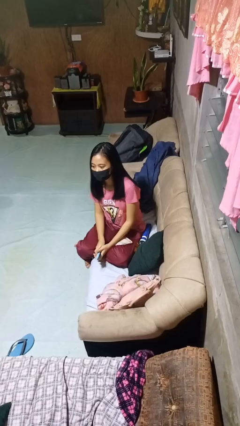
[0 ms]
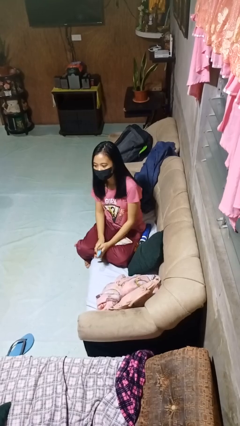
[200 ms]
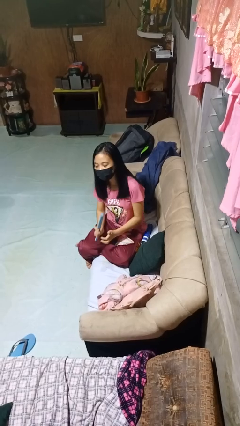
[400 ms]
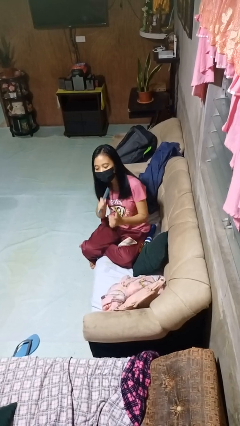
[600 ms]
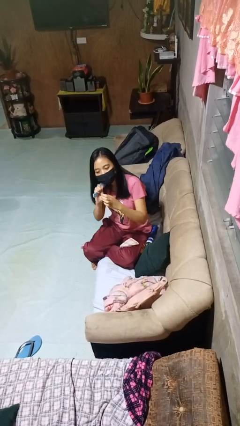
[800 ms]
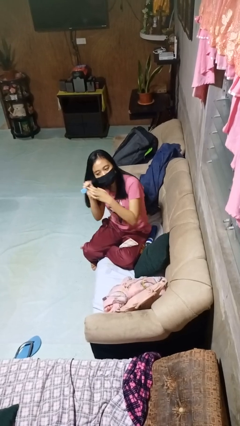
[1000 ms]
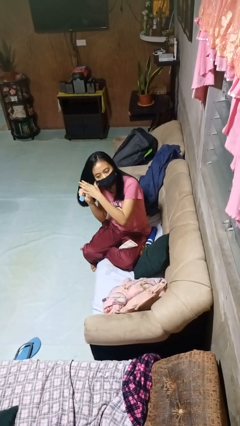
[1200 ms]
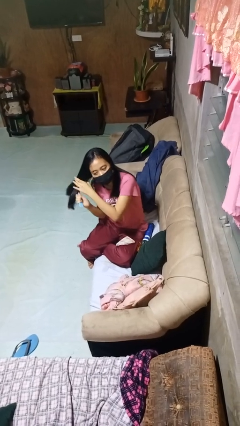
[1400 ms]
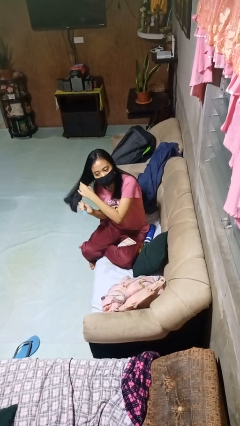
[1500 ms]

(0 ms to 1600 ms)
person brushes hair

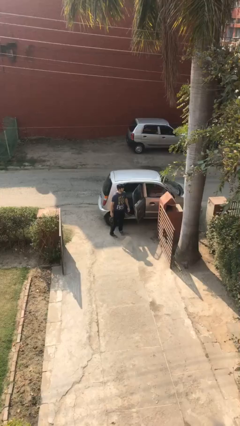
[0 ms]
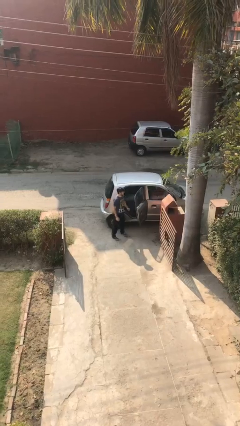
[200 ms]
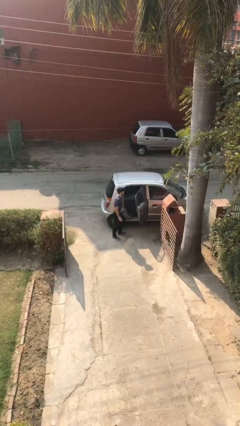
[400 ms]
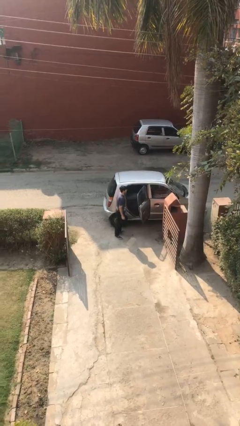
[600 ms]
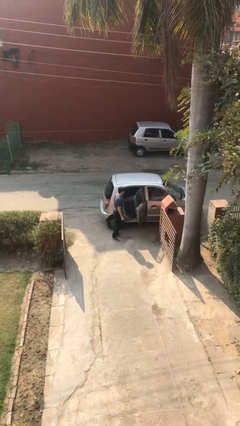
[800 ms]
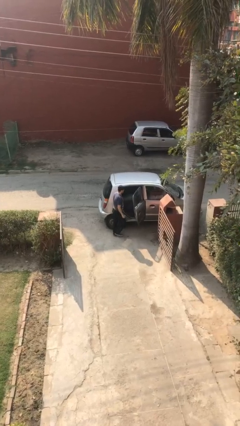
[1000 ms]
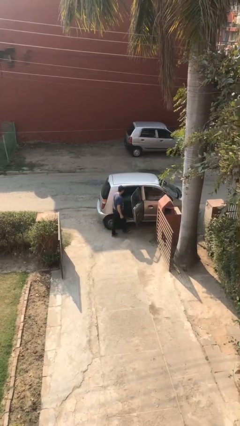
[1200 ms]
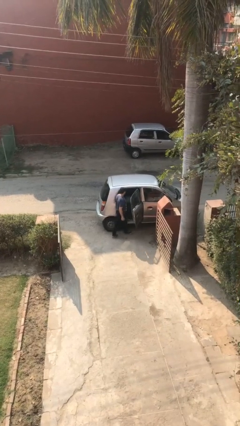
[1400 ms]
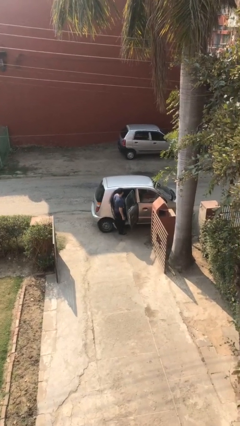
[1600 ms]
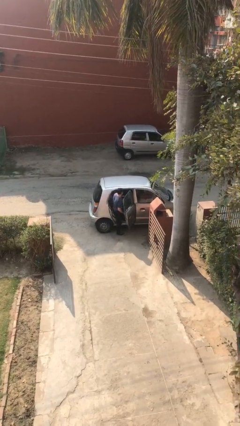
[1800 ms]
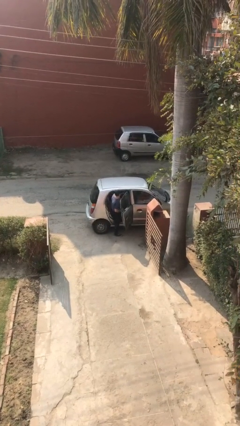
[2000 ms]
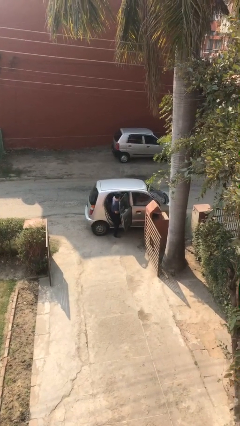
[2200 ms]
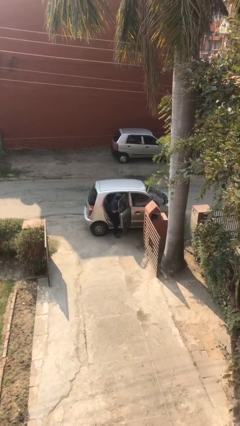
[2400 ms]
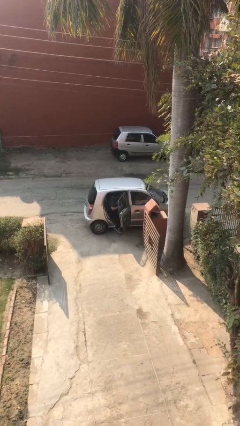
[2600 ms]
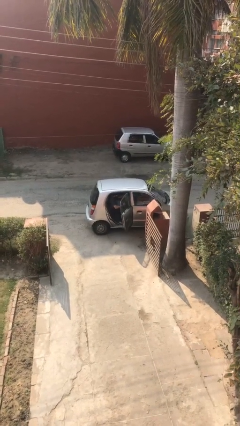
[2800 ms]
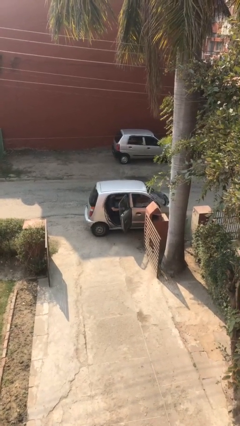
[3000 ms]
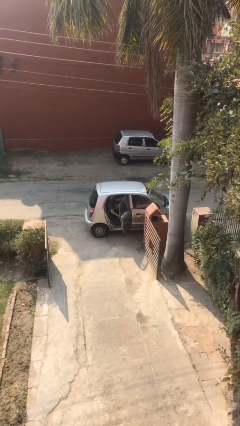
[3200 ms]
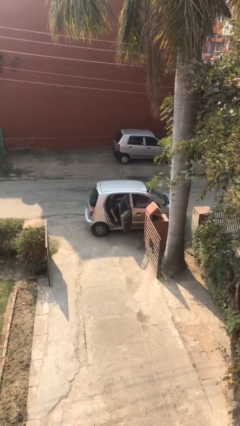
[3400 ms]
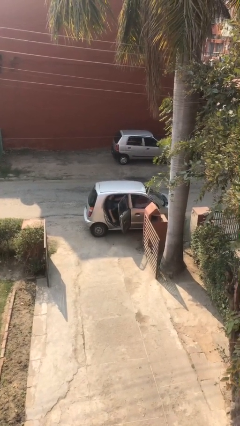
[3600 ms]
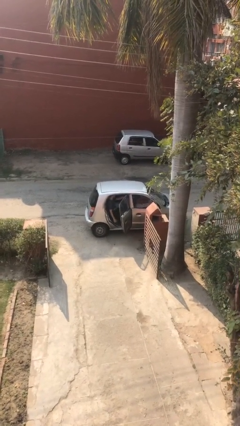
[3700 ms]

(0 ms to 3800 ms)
person enters car

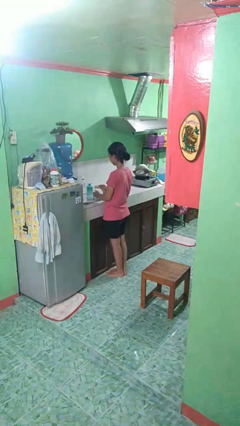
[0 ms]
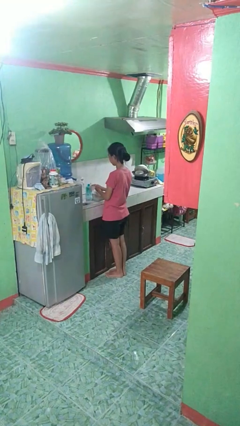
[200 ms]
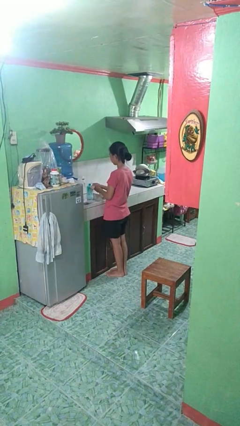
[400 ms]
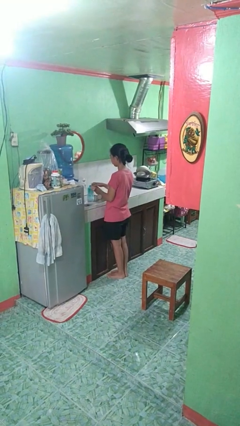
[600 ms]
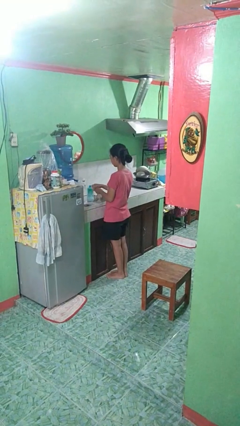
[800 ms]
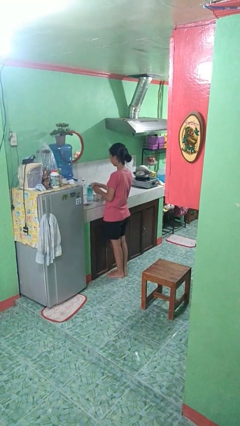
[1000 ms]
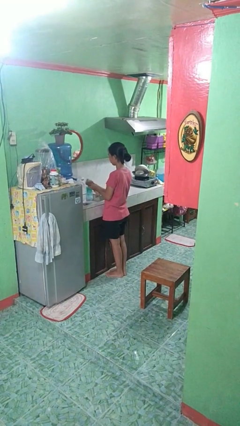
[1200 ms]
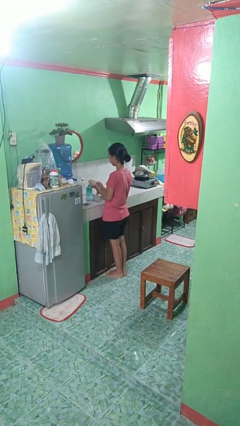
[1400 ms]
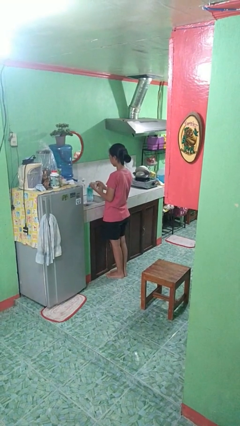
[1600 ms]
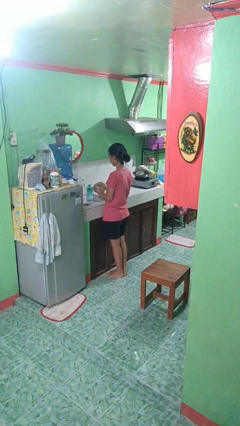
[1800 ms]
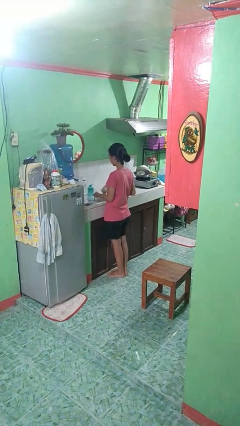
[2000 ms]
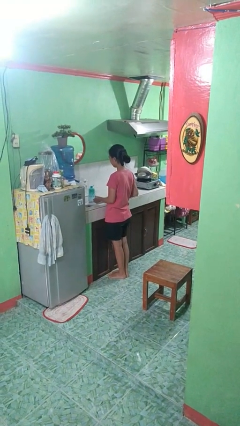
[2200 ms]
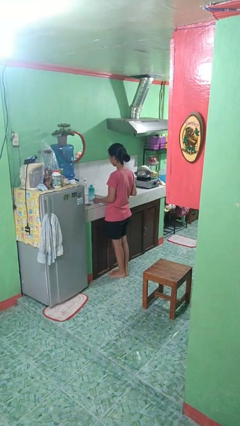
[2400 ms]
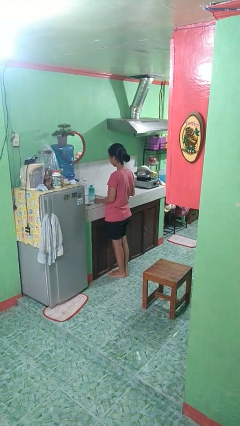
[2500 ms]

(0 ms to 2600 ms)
person dries hands with towel

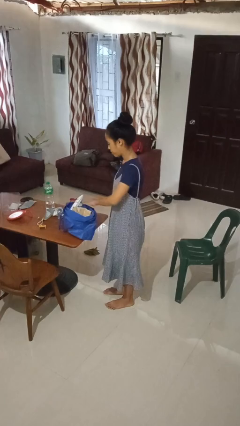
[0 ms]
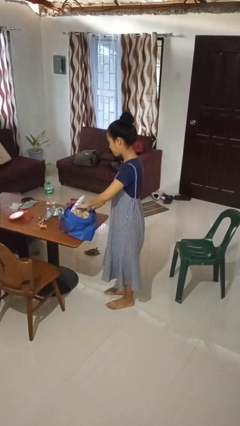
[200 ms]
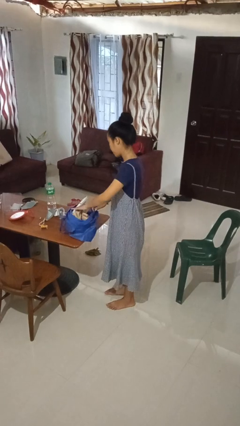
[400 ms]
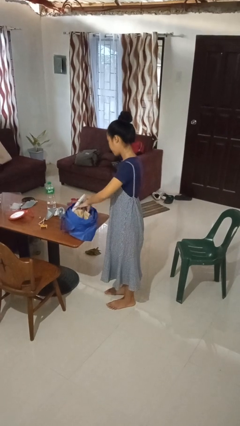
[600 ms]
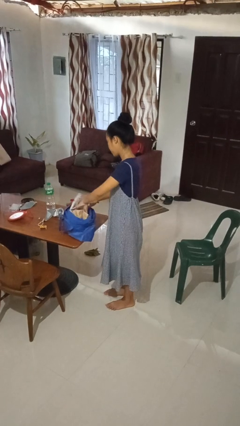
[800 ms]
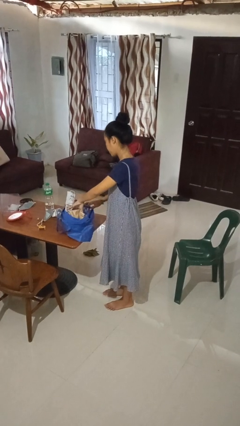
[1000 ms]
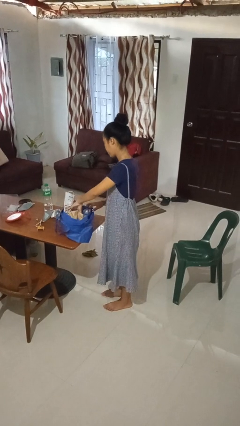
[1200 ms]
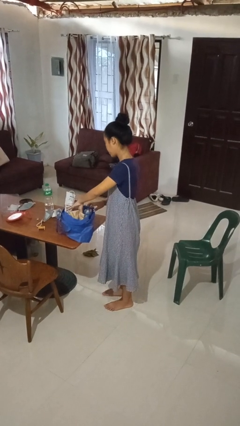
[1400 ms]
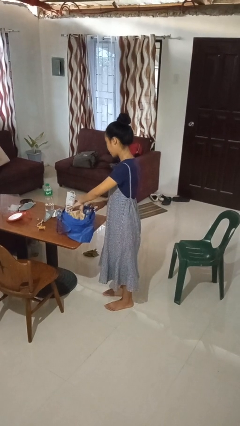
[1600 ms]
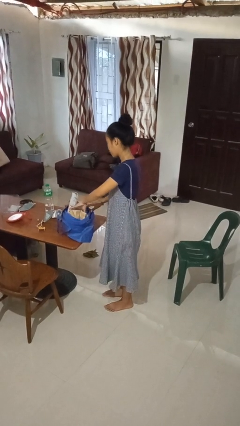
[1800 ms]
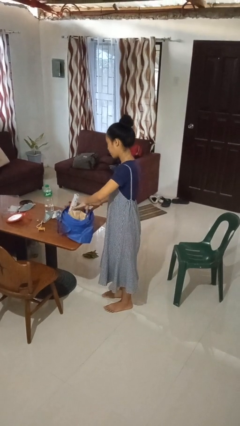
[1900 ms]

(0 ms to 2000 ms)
person searches in bag

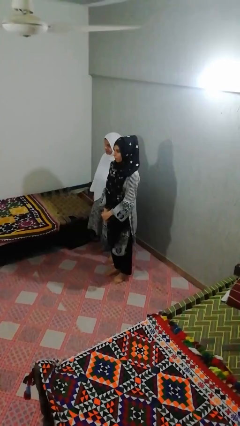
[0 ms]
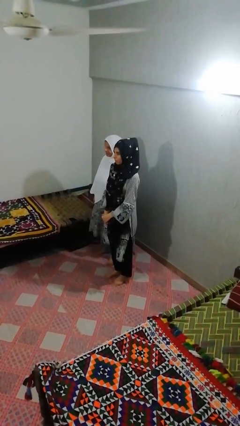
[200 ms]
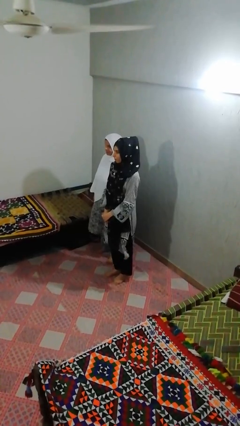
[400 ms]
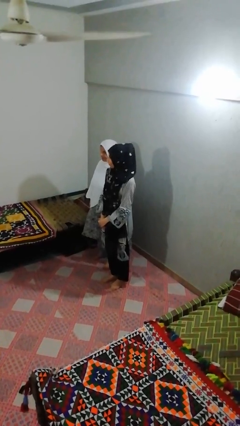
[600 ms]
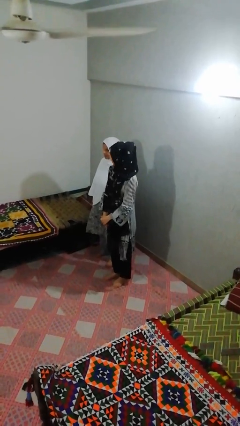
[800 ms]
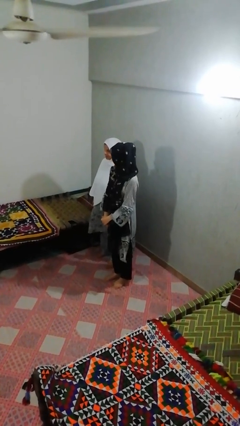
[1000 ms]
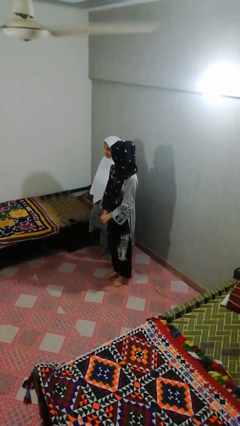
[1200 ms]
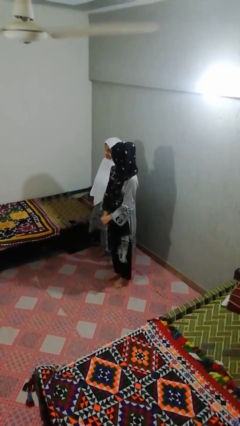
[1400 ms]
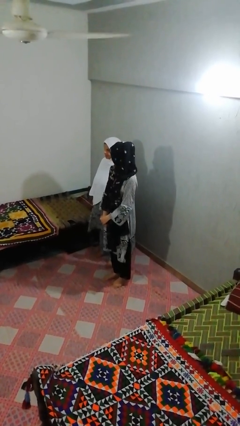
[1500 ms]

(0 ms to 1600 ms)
person looks over shoulder

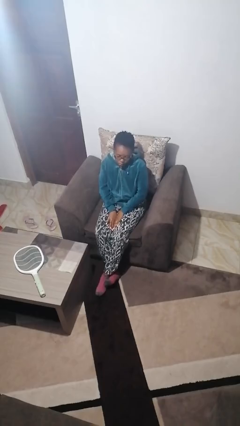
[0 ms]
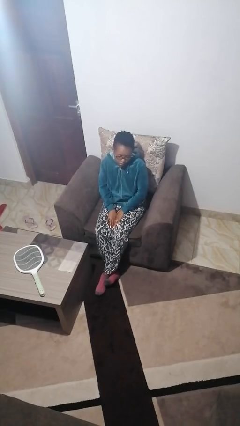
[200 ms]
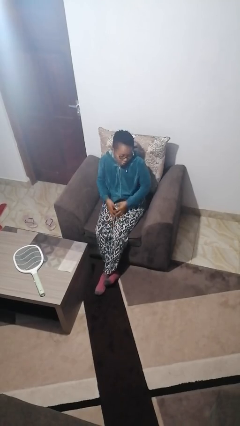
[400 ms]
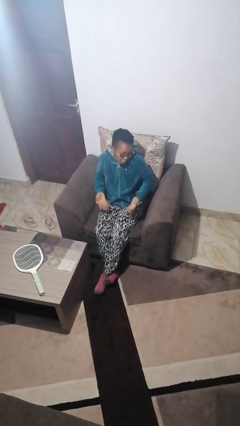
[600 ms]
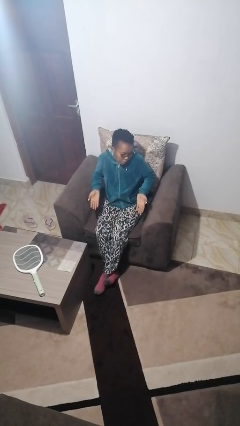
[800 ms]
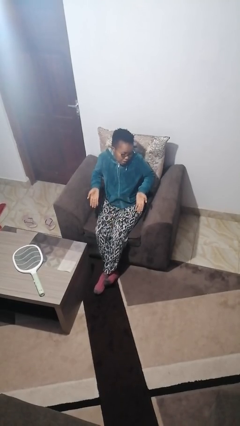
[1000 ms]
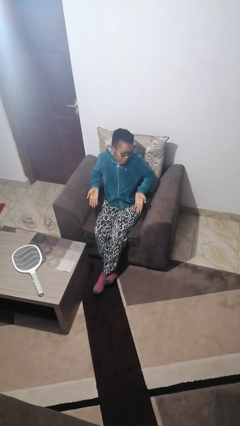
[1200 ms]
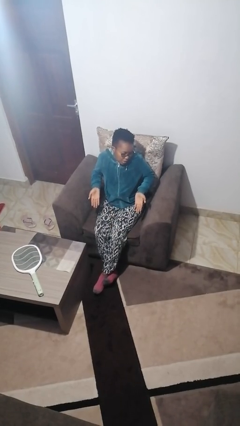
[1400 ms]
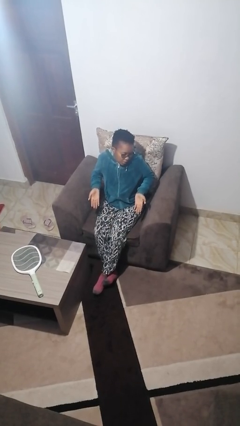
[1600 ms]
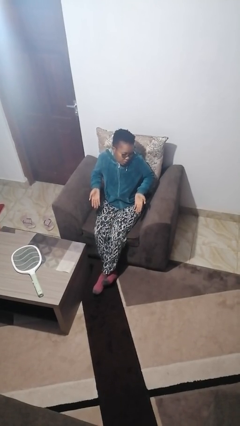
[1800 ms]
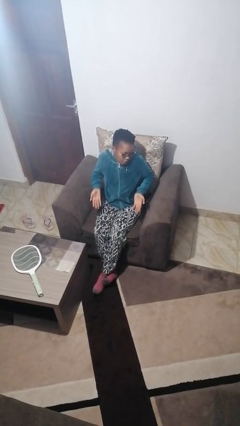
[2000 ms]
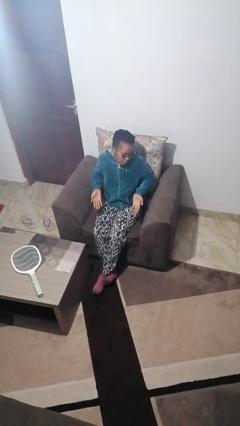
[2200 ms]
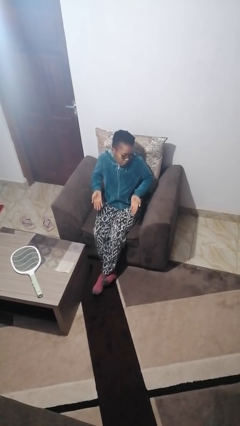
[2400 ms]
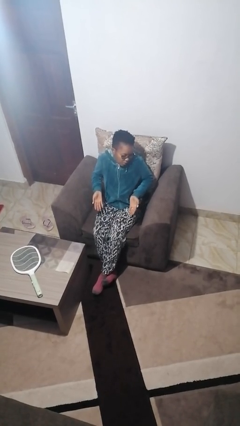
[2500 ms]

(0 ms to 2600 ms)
person shrugs

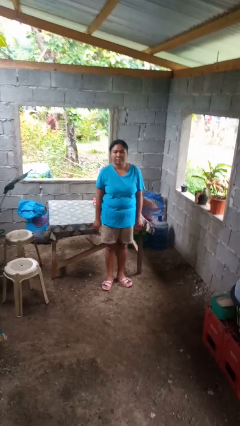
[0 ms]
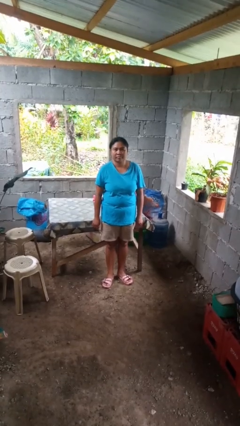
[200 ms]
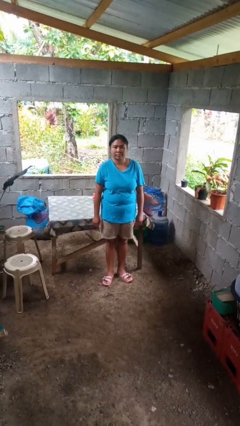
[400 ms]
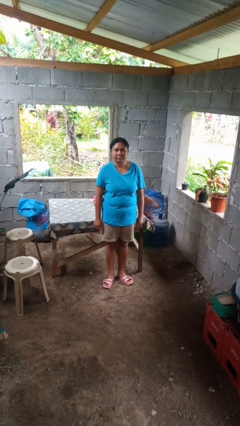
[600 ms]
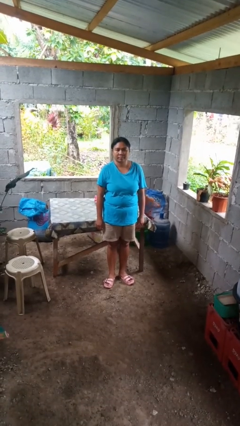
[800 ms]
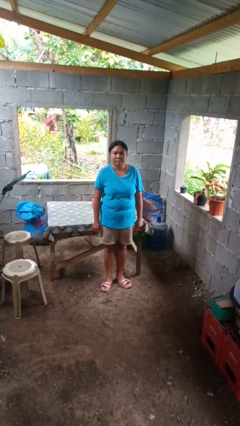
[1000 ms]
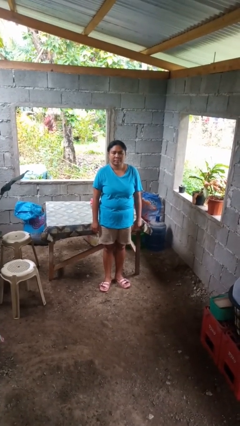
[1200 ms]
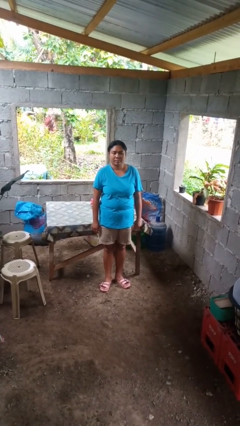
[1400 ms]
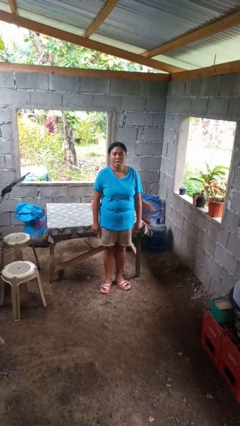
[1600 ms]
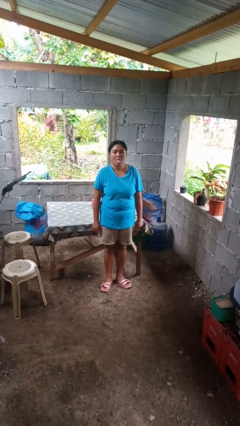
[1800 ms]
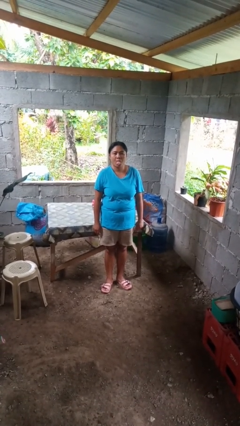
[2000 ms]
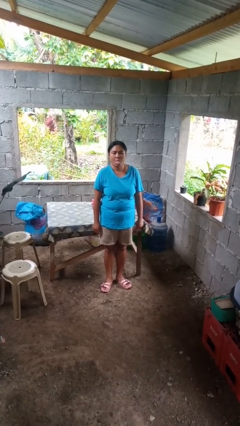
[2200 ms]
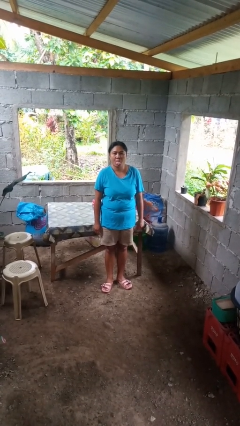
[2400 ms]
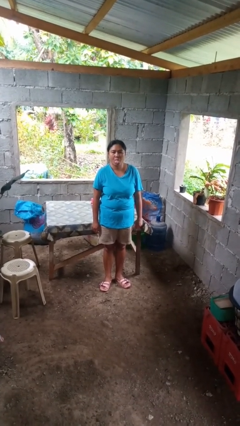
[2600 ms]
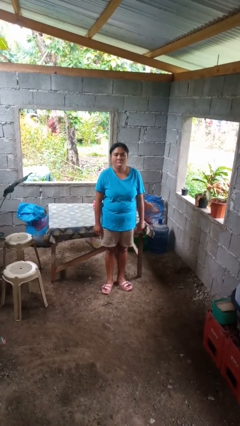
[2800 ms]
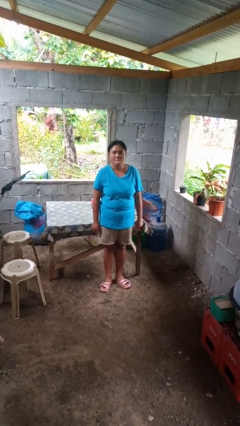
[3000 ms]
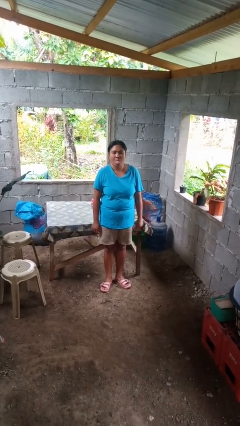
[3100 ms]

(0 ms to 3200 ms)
person sticks out tongue
